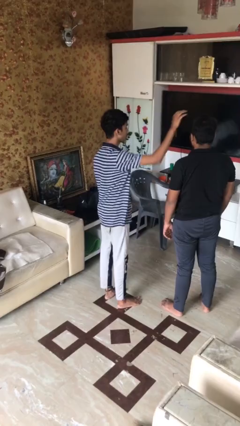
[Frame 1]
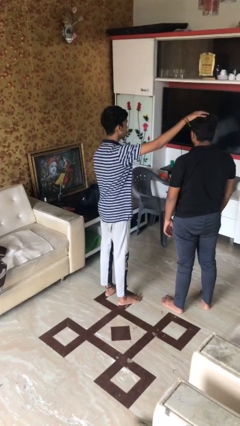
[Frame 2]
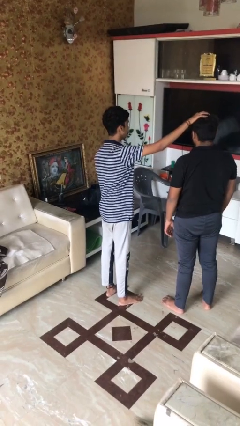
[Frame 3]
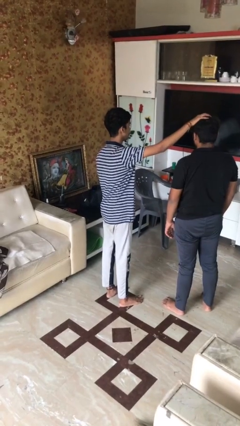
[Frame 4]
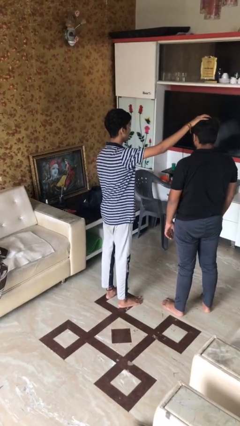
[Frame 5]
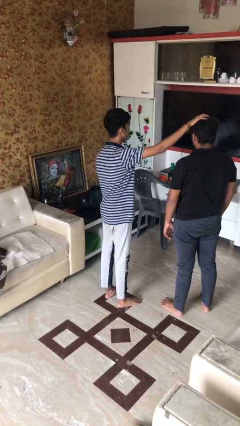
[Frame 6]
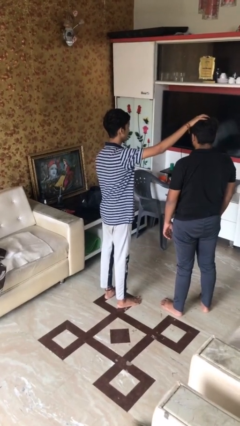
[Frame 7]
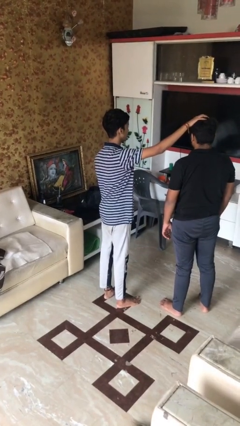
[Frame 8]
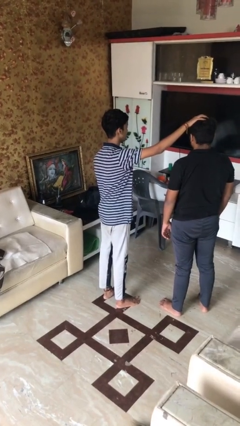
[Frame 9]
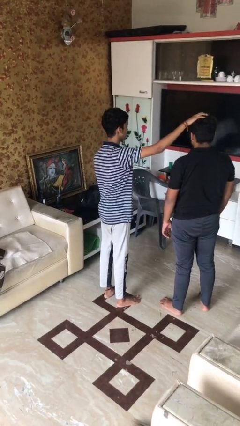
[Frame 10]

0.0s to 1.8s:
person grabs person by hair

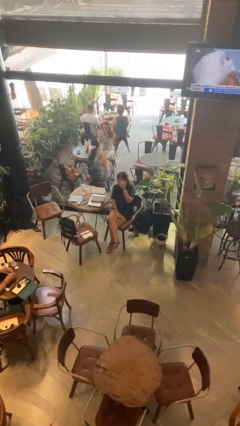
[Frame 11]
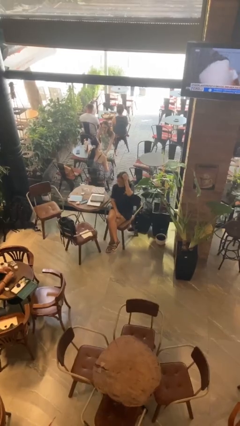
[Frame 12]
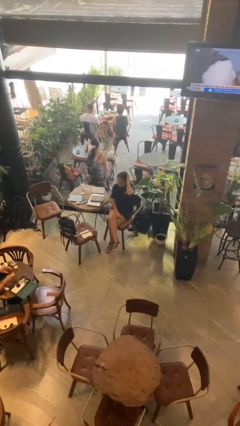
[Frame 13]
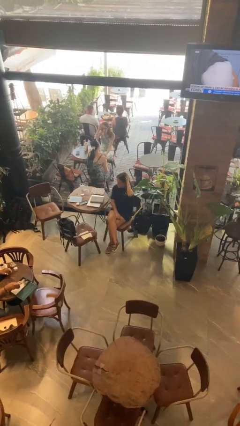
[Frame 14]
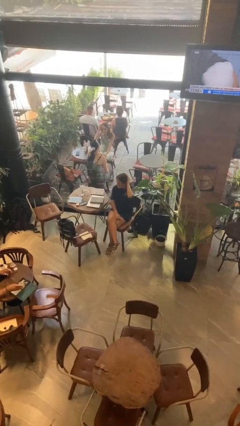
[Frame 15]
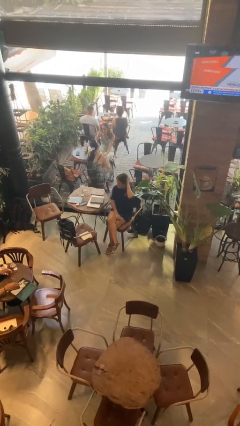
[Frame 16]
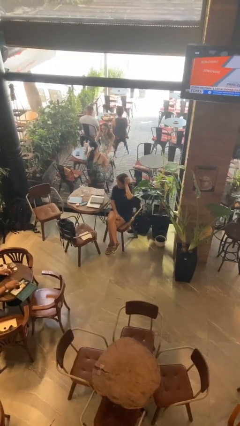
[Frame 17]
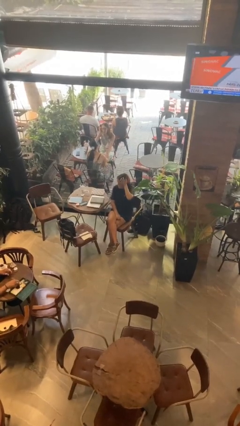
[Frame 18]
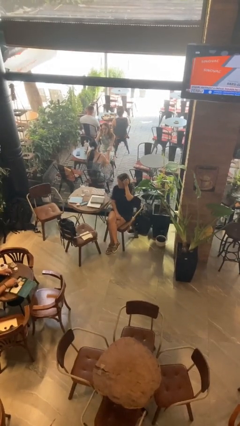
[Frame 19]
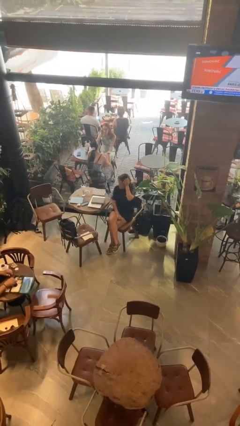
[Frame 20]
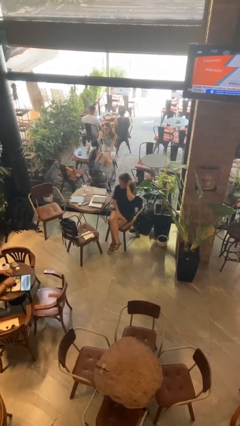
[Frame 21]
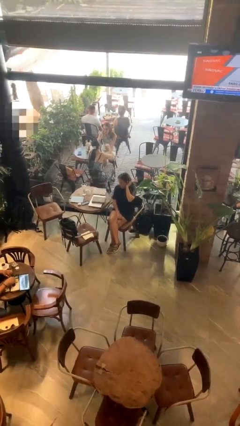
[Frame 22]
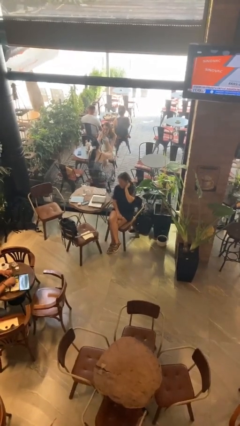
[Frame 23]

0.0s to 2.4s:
person scratches face

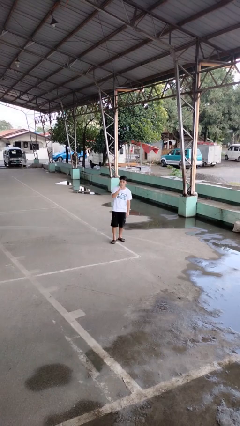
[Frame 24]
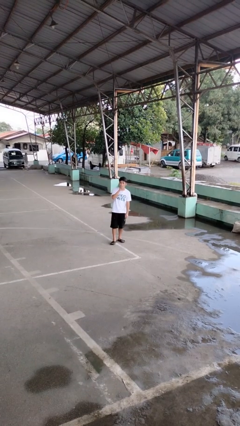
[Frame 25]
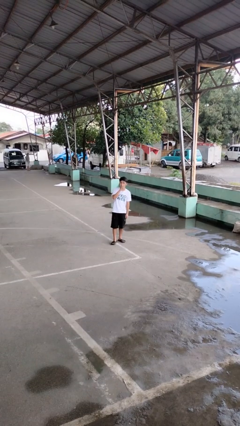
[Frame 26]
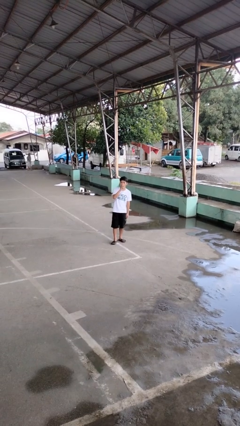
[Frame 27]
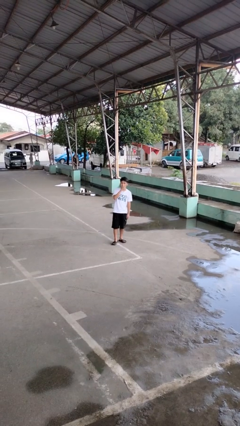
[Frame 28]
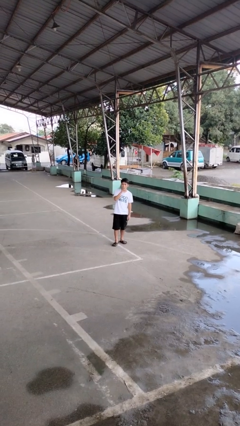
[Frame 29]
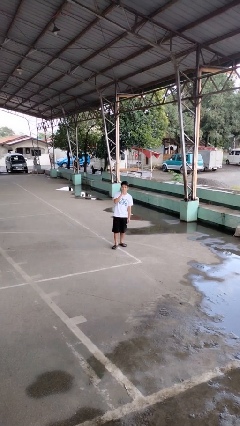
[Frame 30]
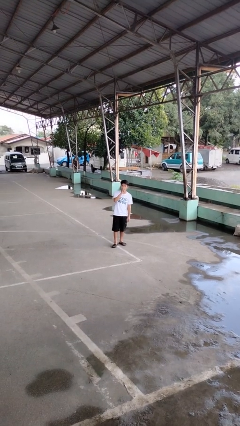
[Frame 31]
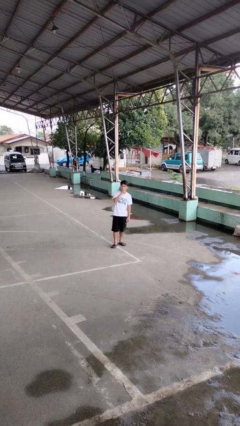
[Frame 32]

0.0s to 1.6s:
person gestures be quiet

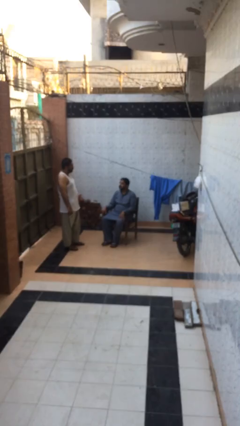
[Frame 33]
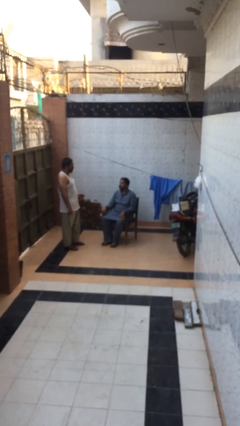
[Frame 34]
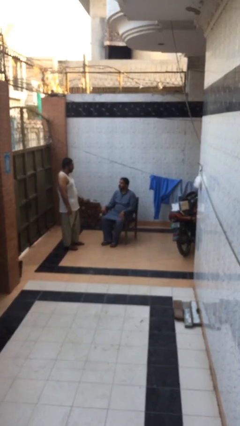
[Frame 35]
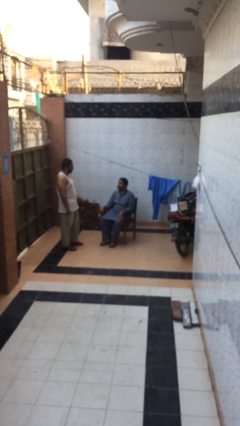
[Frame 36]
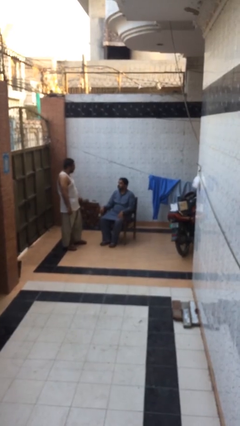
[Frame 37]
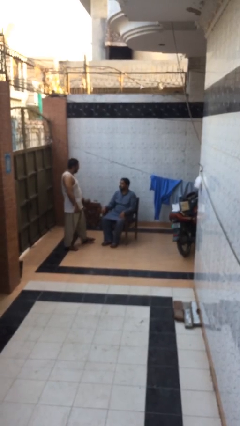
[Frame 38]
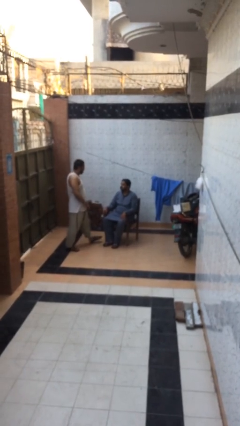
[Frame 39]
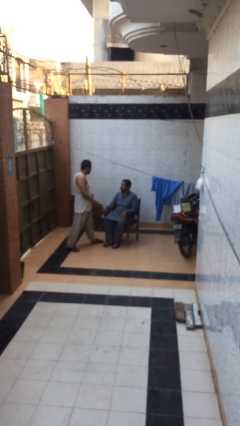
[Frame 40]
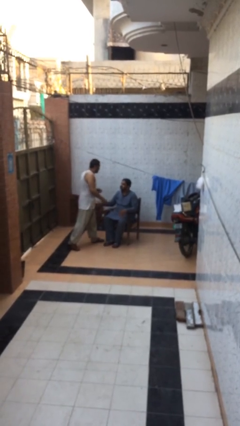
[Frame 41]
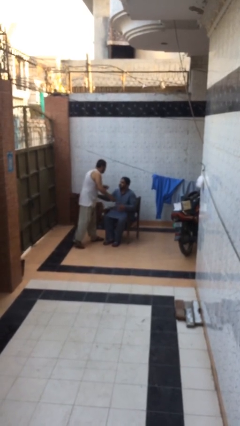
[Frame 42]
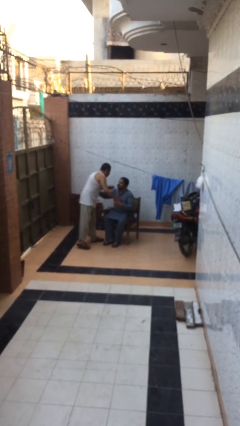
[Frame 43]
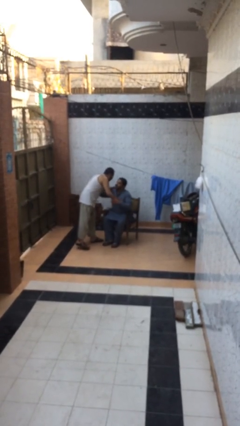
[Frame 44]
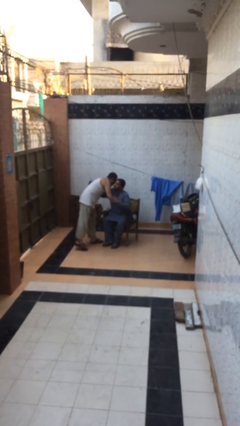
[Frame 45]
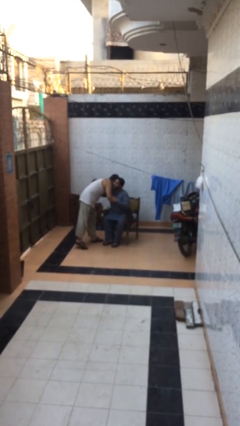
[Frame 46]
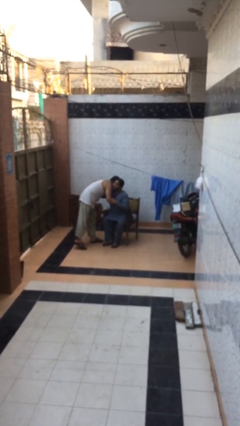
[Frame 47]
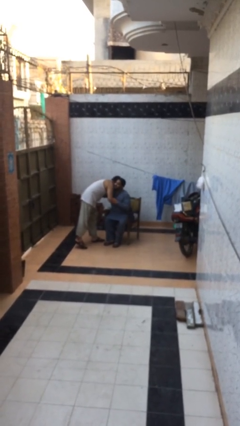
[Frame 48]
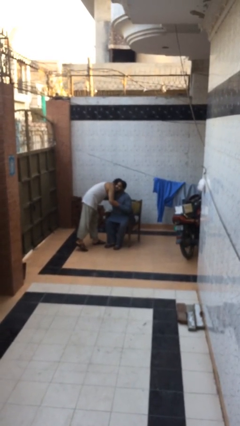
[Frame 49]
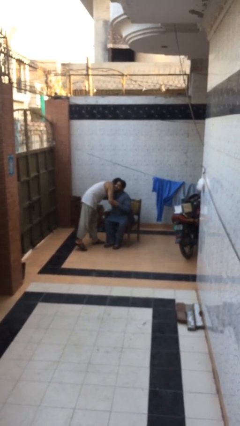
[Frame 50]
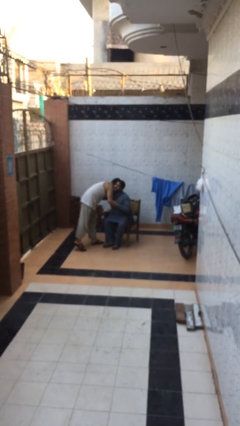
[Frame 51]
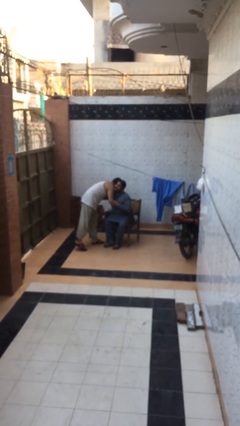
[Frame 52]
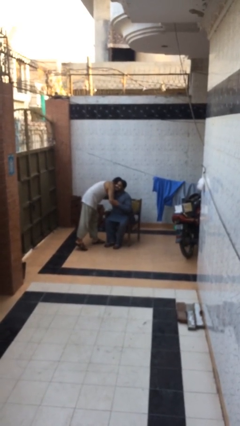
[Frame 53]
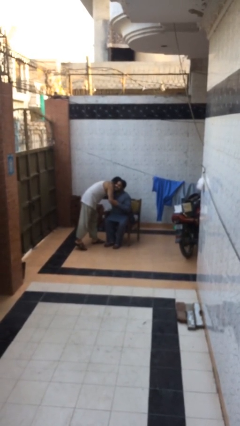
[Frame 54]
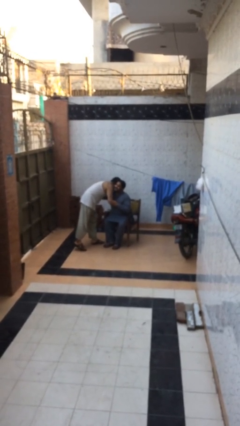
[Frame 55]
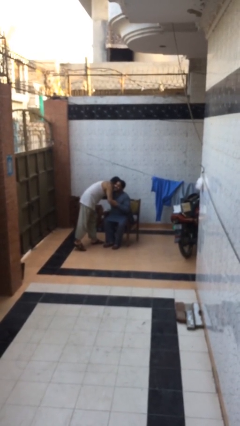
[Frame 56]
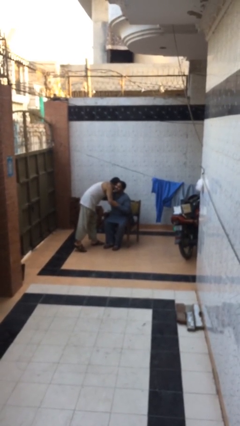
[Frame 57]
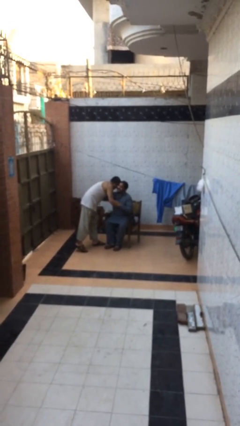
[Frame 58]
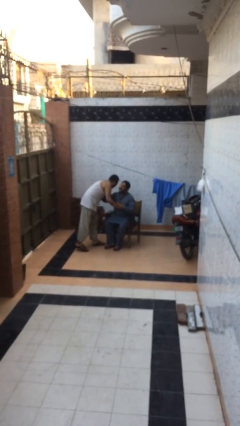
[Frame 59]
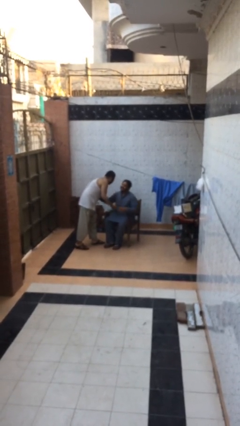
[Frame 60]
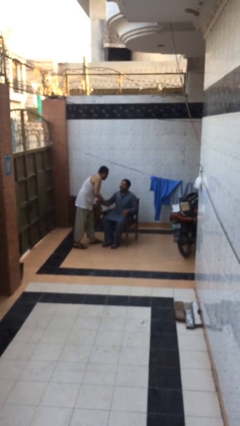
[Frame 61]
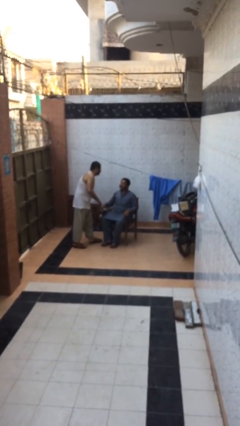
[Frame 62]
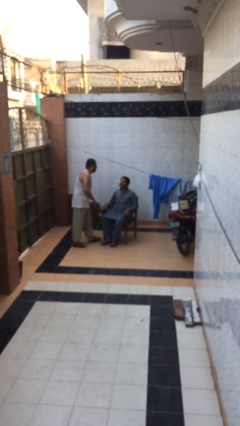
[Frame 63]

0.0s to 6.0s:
person embraces person

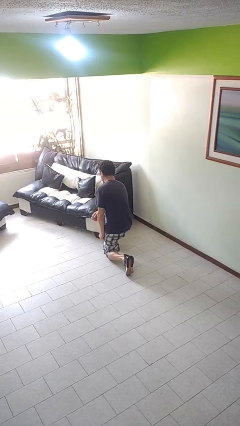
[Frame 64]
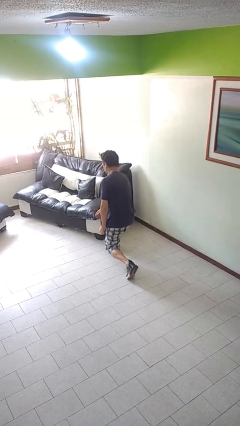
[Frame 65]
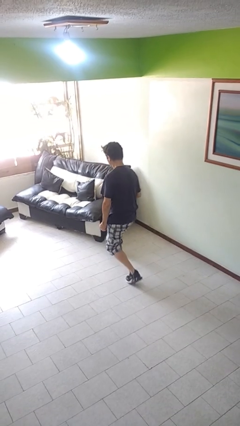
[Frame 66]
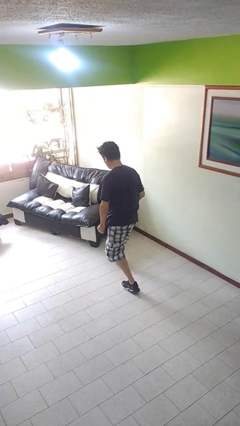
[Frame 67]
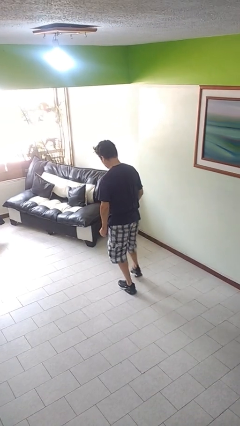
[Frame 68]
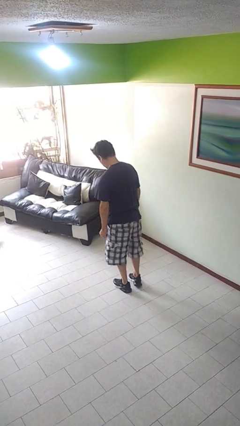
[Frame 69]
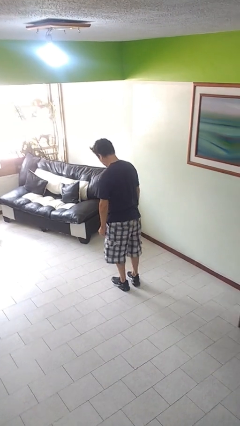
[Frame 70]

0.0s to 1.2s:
person stands up from floor

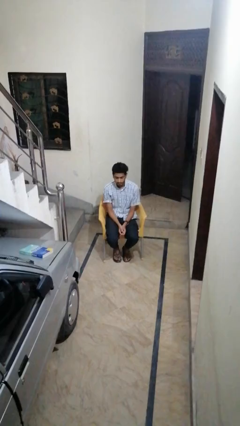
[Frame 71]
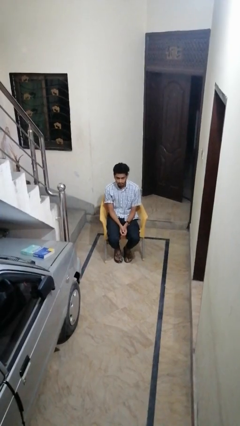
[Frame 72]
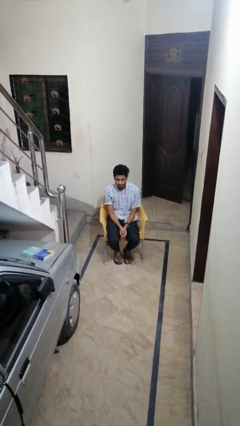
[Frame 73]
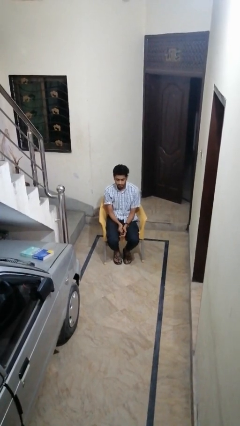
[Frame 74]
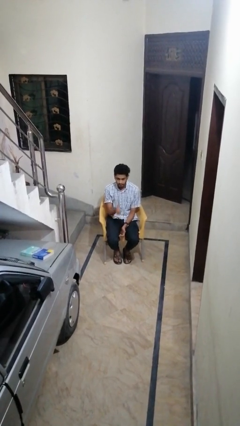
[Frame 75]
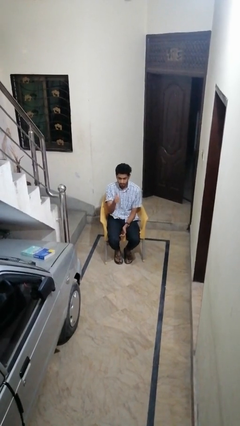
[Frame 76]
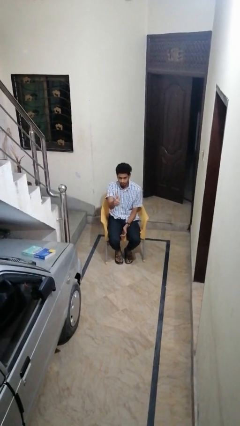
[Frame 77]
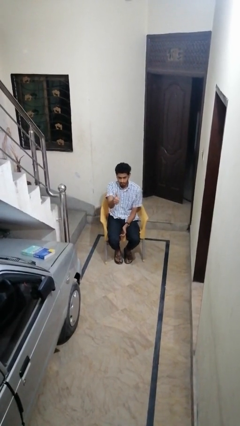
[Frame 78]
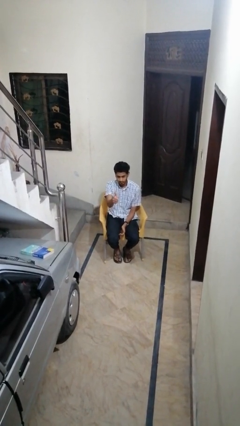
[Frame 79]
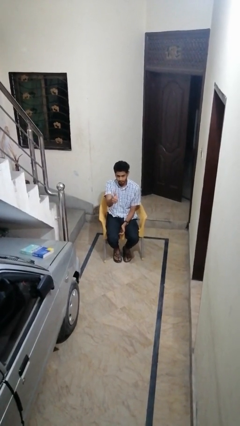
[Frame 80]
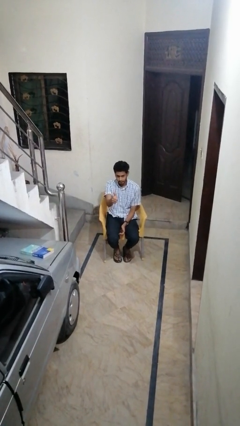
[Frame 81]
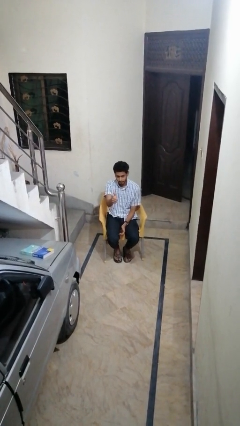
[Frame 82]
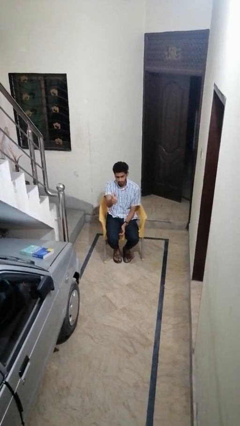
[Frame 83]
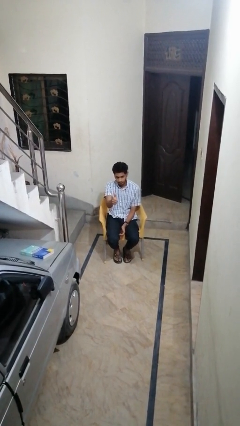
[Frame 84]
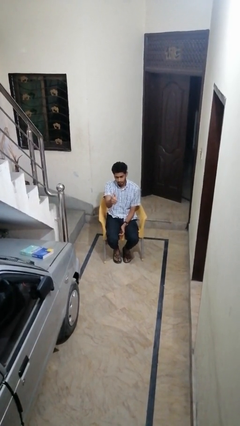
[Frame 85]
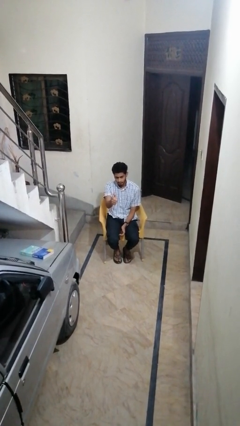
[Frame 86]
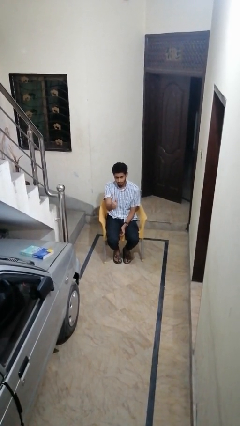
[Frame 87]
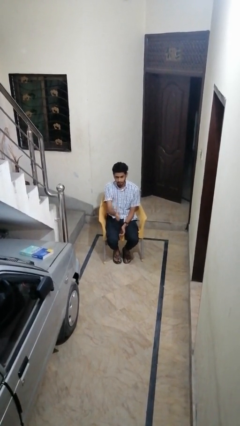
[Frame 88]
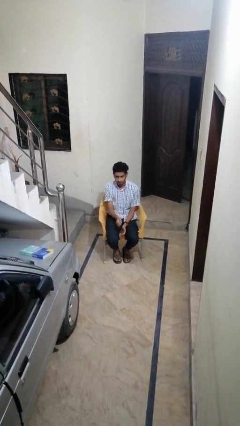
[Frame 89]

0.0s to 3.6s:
person gestures thumbs up

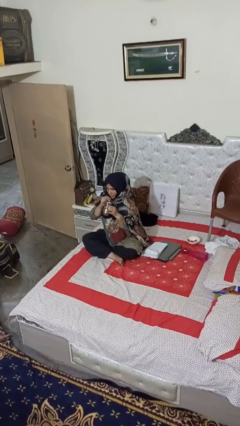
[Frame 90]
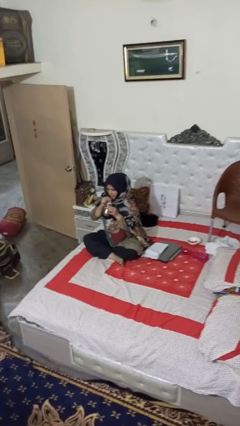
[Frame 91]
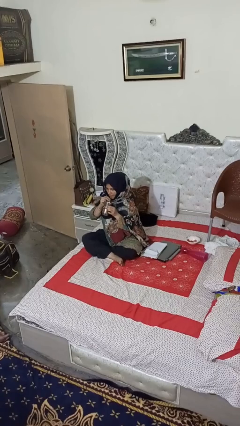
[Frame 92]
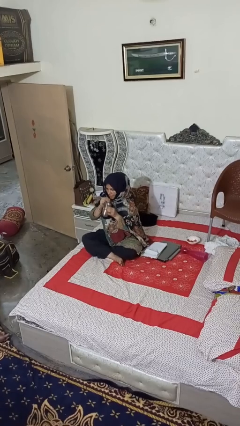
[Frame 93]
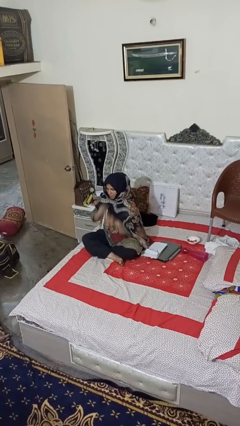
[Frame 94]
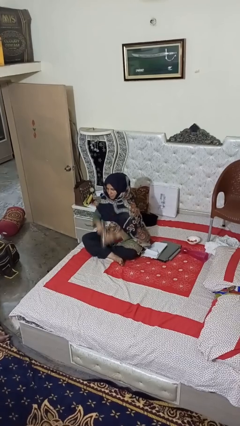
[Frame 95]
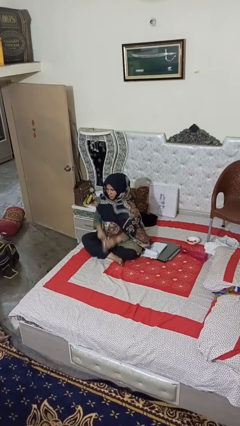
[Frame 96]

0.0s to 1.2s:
person drinks from straw
